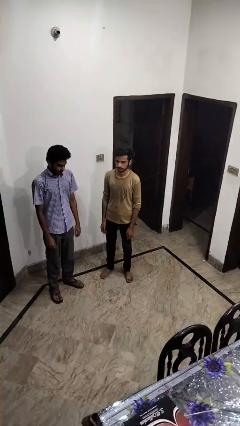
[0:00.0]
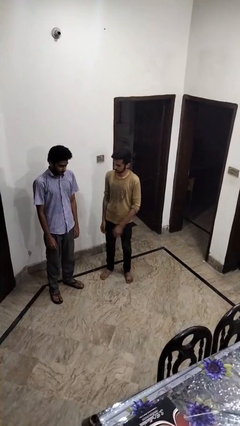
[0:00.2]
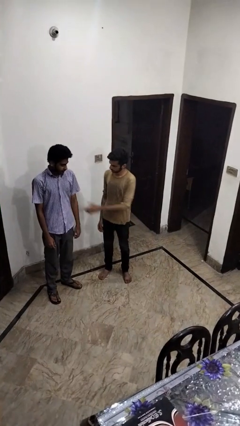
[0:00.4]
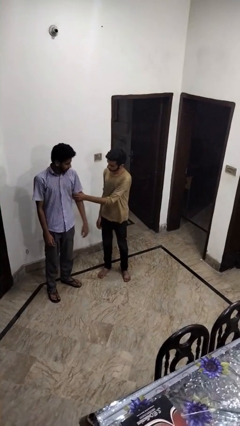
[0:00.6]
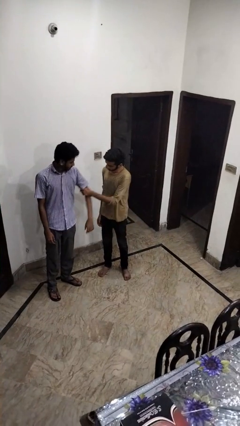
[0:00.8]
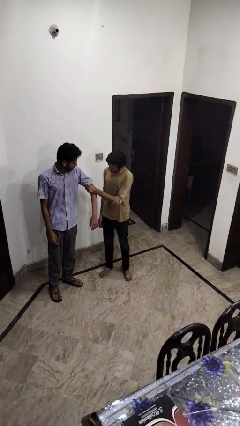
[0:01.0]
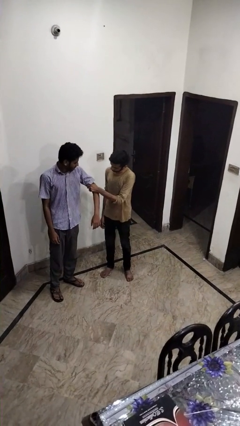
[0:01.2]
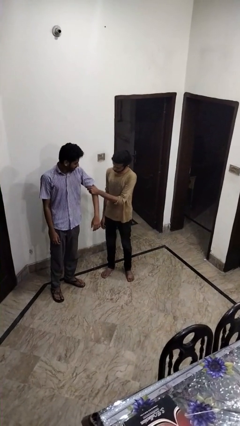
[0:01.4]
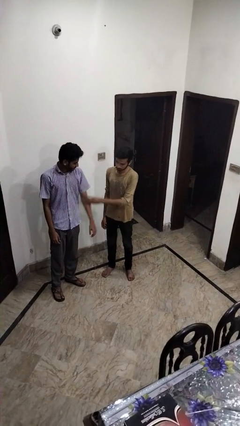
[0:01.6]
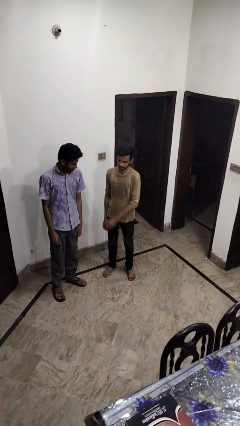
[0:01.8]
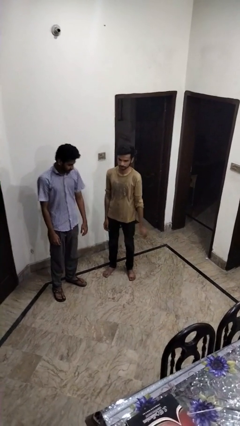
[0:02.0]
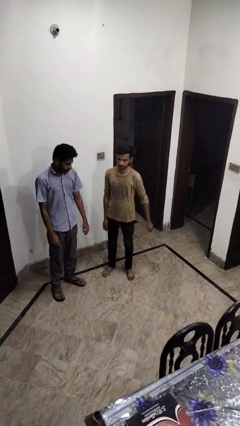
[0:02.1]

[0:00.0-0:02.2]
person grabs person by bicep

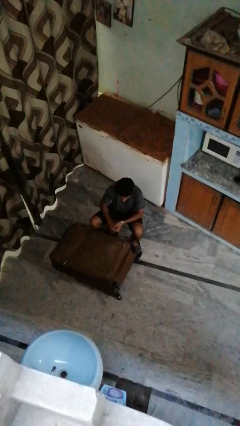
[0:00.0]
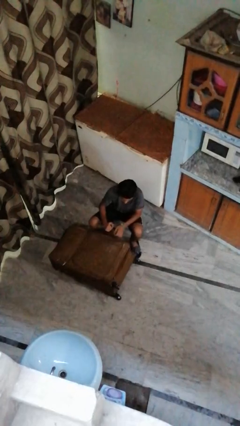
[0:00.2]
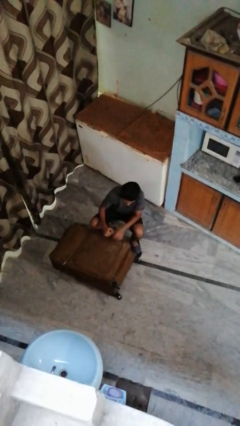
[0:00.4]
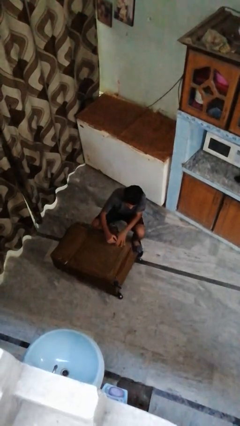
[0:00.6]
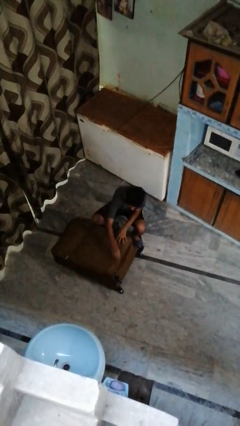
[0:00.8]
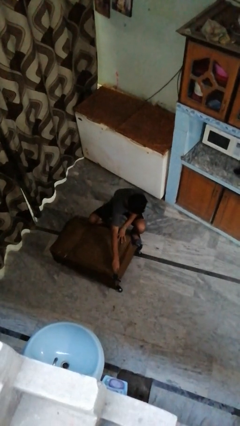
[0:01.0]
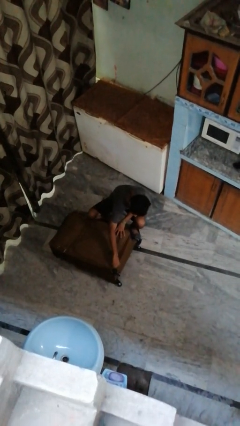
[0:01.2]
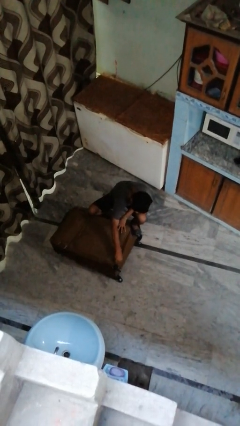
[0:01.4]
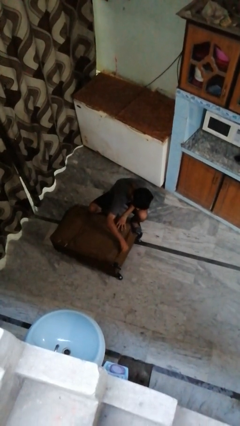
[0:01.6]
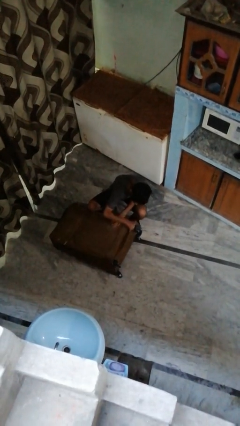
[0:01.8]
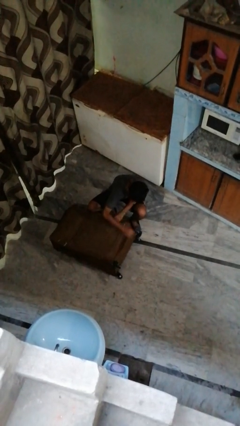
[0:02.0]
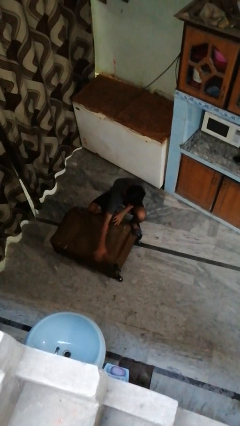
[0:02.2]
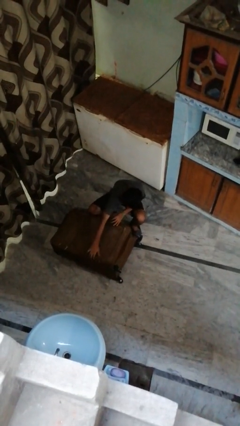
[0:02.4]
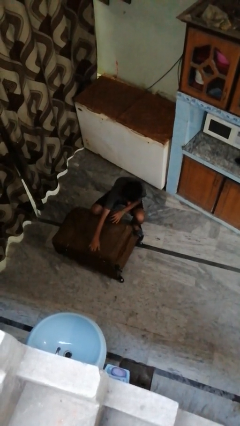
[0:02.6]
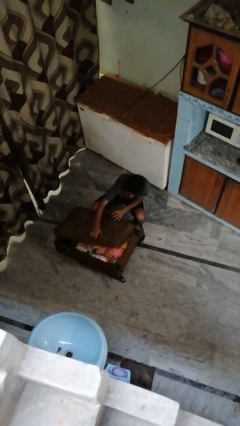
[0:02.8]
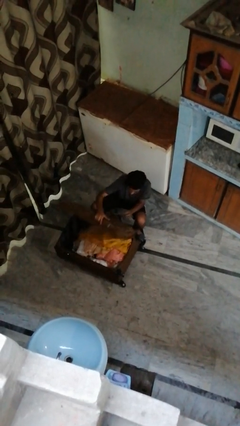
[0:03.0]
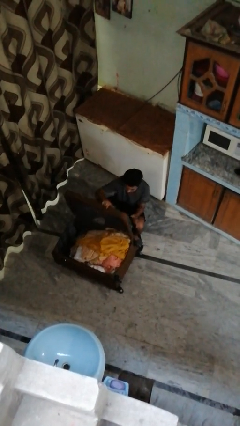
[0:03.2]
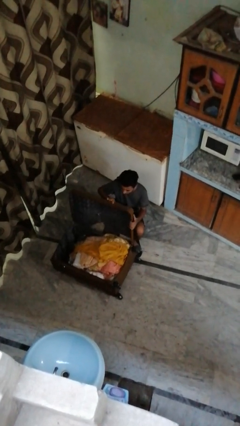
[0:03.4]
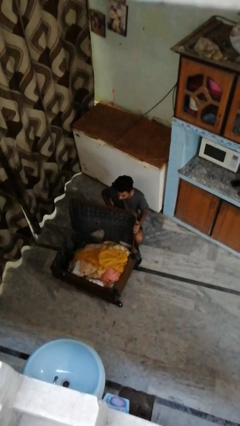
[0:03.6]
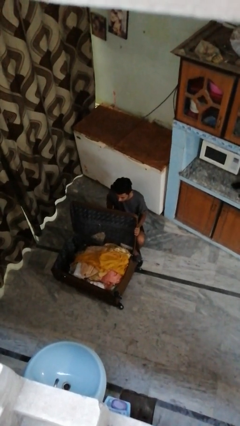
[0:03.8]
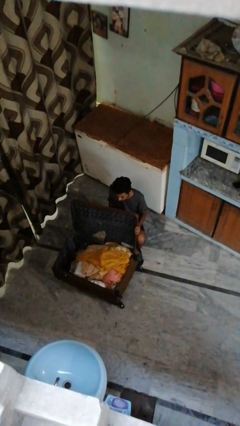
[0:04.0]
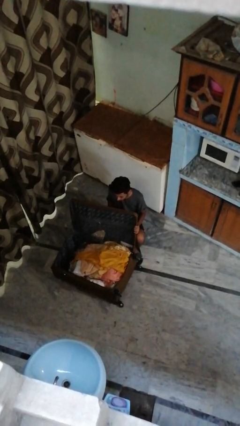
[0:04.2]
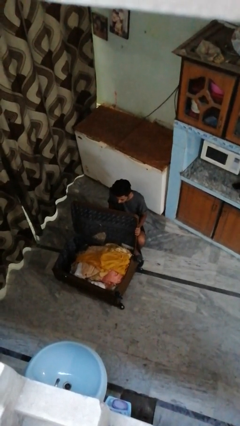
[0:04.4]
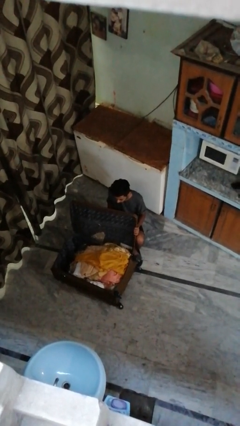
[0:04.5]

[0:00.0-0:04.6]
person opens suitcase

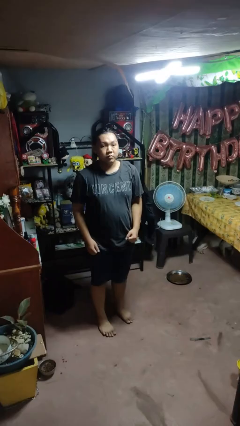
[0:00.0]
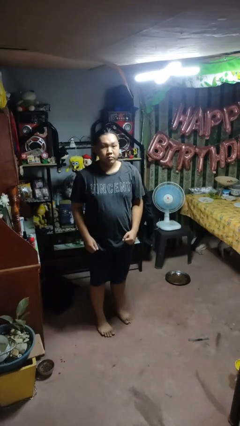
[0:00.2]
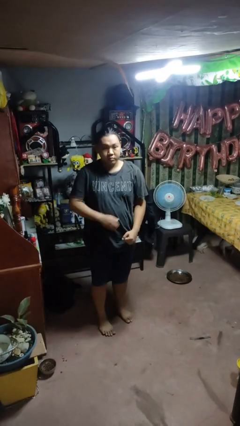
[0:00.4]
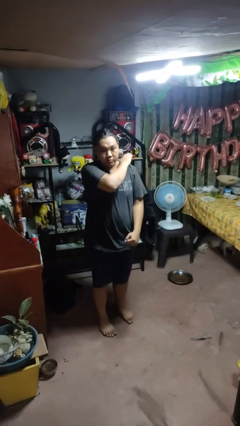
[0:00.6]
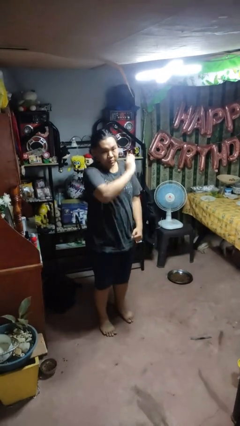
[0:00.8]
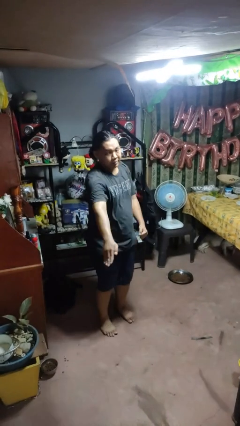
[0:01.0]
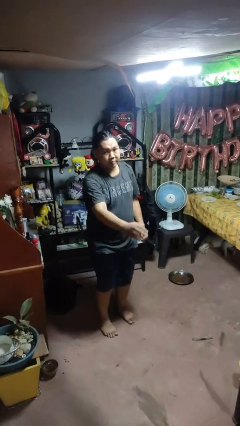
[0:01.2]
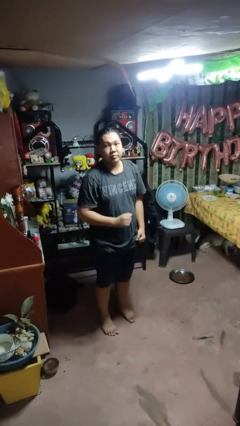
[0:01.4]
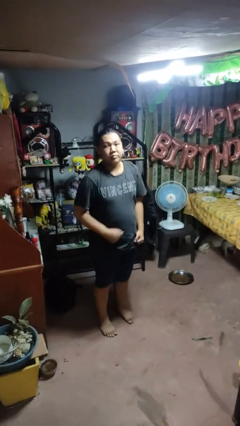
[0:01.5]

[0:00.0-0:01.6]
person karate chop

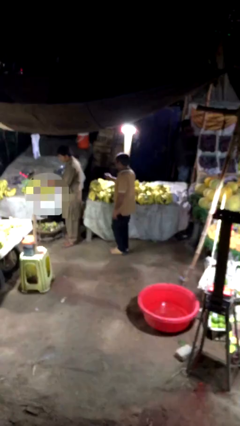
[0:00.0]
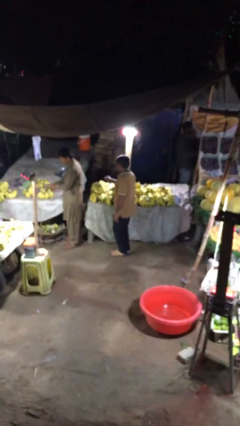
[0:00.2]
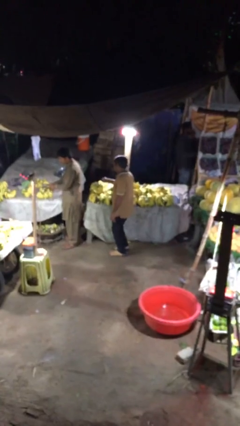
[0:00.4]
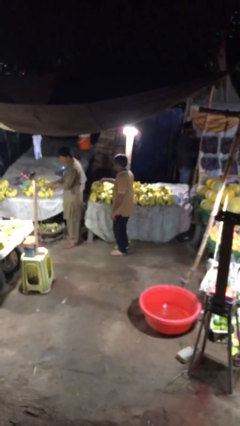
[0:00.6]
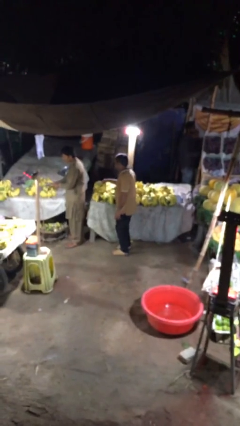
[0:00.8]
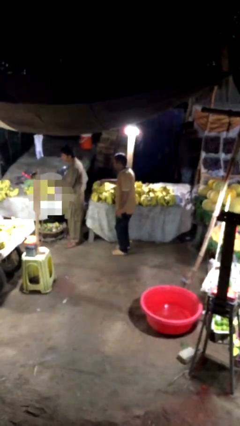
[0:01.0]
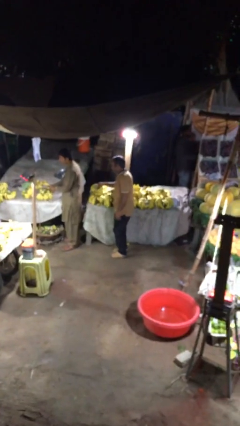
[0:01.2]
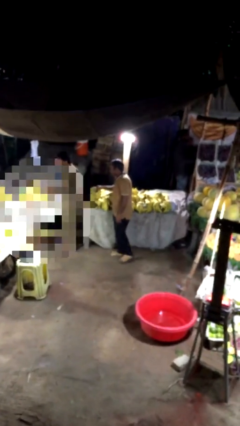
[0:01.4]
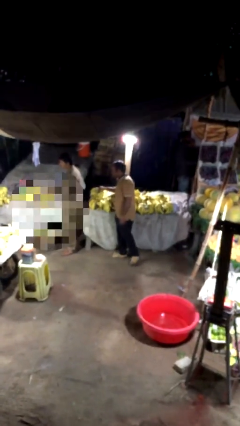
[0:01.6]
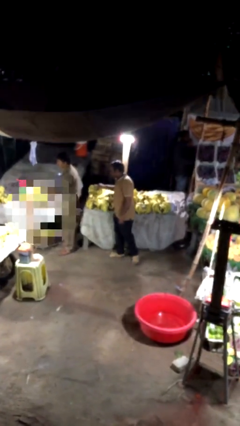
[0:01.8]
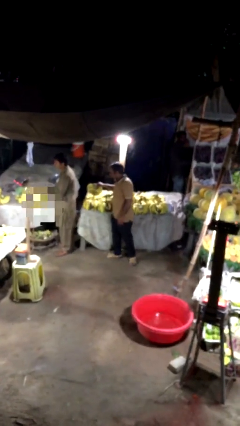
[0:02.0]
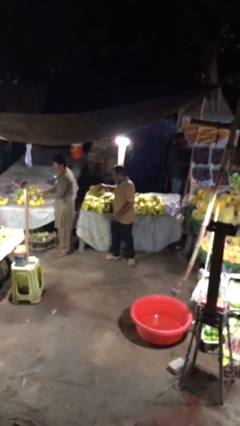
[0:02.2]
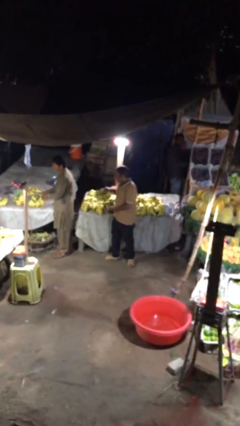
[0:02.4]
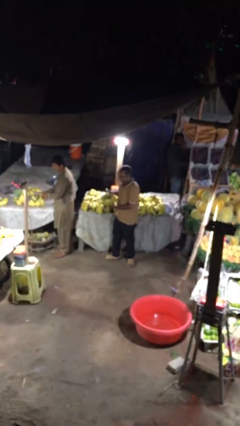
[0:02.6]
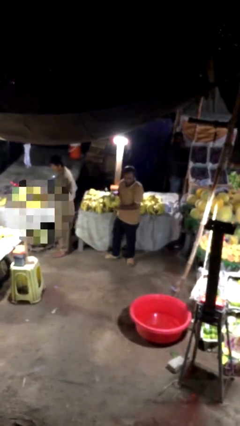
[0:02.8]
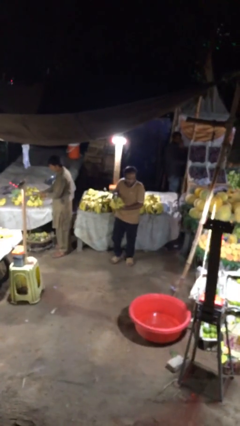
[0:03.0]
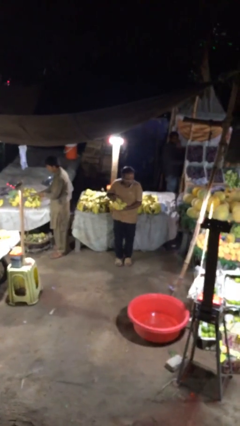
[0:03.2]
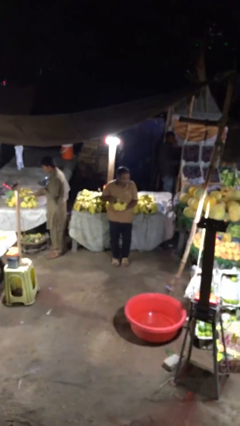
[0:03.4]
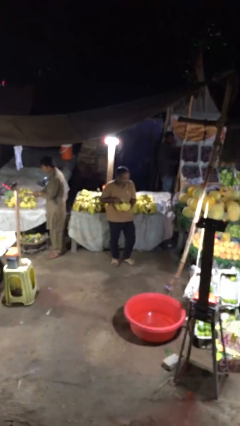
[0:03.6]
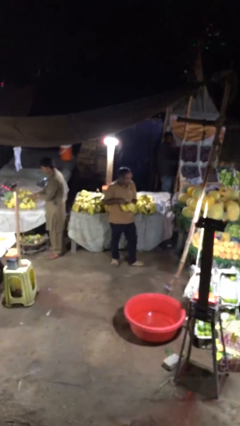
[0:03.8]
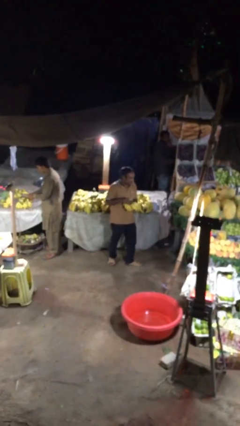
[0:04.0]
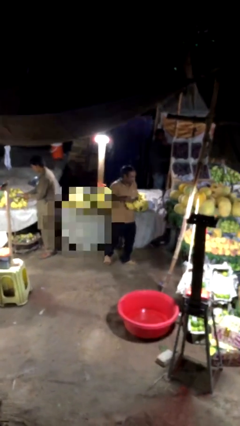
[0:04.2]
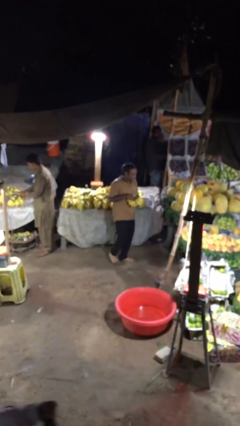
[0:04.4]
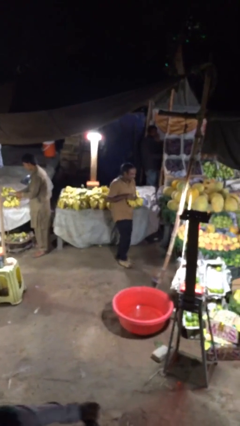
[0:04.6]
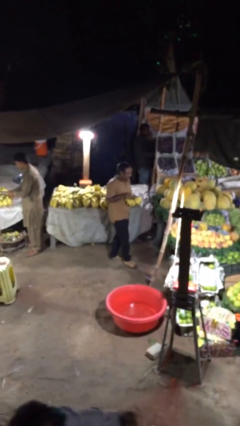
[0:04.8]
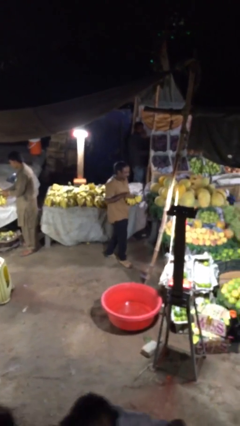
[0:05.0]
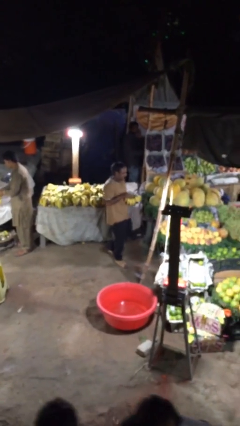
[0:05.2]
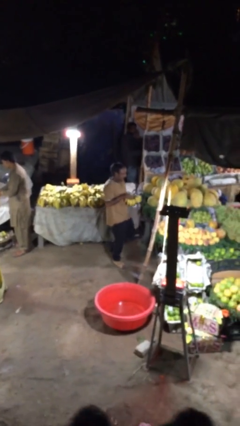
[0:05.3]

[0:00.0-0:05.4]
person steals object from person

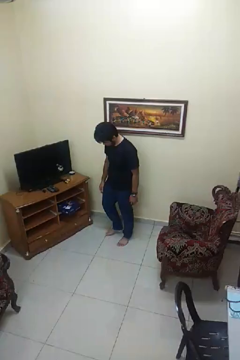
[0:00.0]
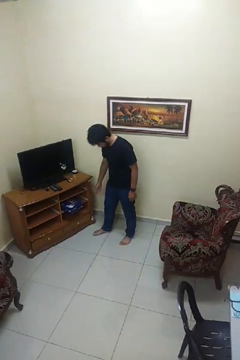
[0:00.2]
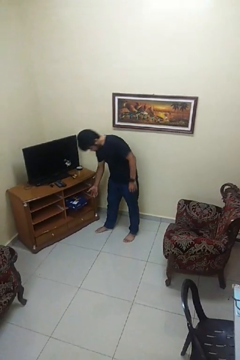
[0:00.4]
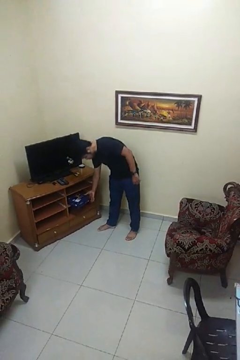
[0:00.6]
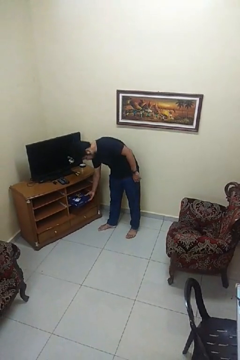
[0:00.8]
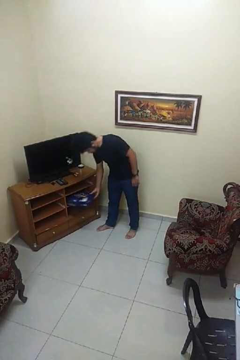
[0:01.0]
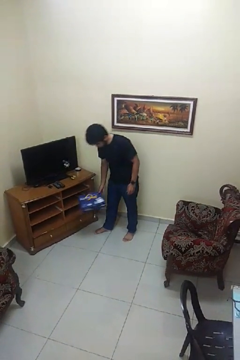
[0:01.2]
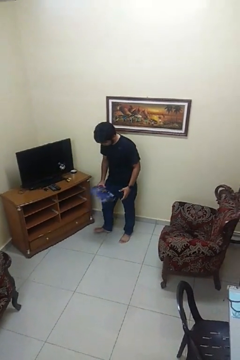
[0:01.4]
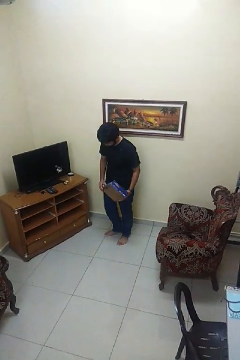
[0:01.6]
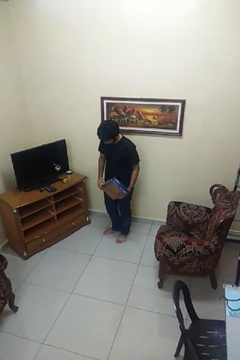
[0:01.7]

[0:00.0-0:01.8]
person picks up object from cabinet

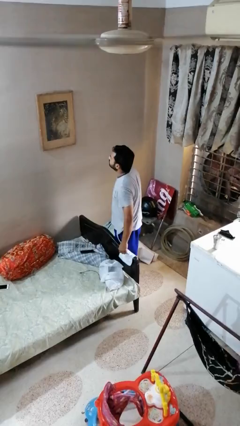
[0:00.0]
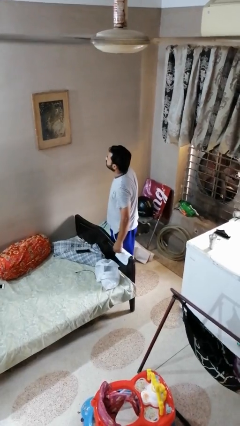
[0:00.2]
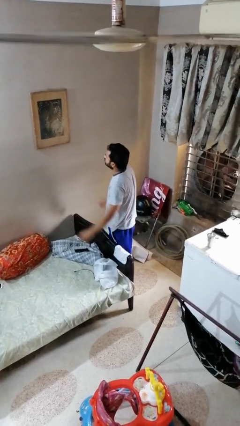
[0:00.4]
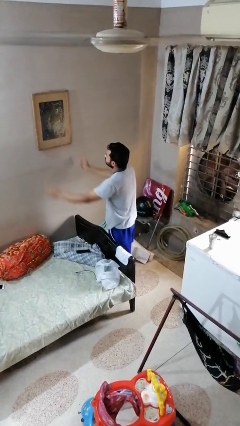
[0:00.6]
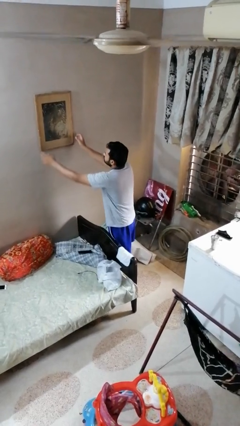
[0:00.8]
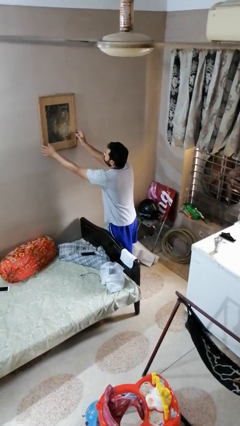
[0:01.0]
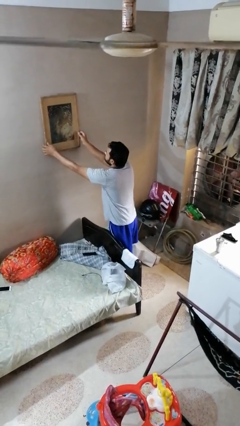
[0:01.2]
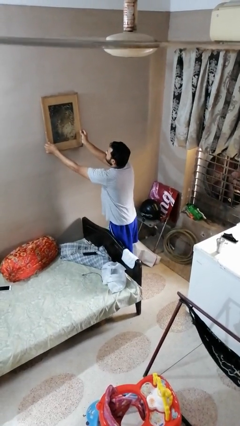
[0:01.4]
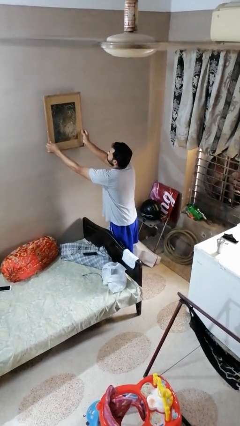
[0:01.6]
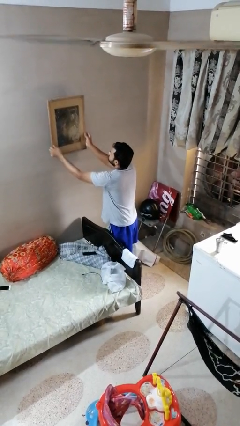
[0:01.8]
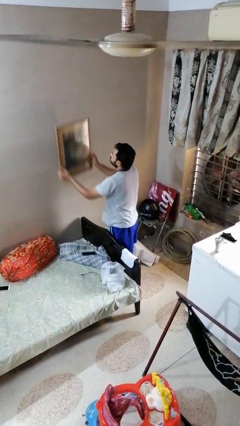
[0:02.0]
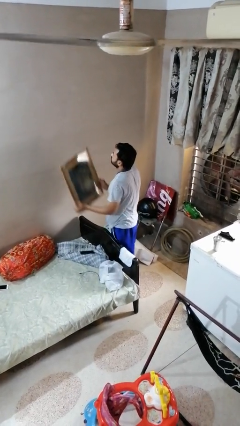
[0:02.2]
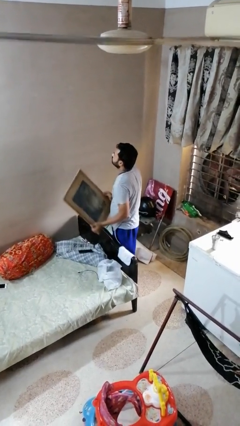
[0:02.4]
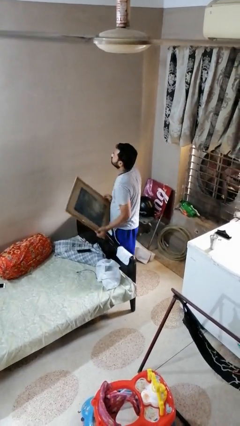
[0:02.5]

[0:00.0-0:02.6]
person takes down picture frame
